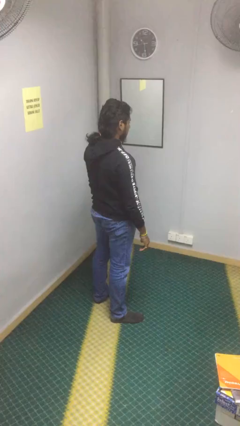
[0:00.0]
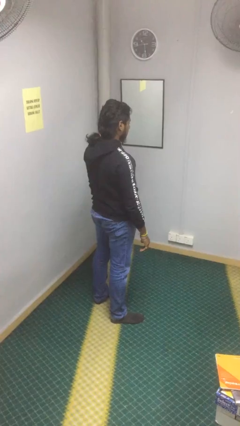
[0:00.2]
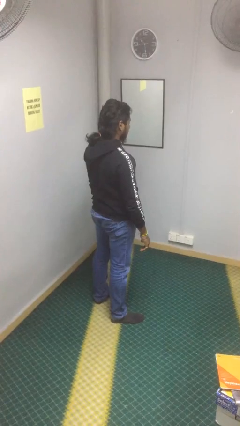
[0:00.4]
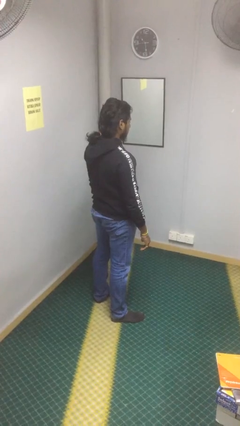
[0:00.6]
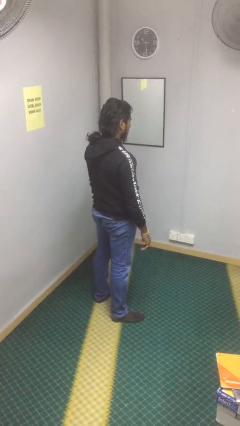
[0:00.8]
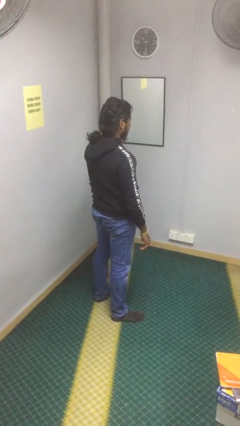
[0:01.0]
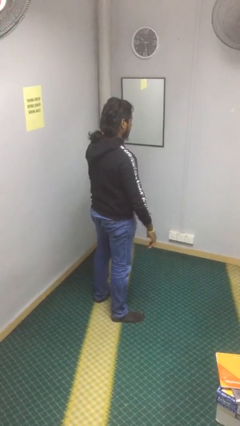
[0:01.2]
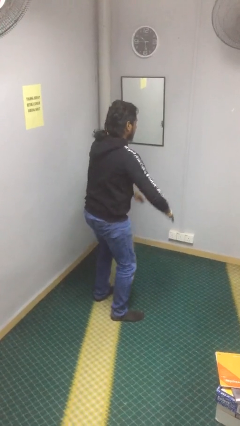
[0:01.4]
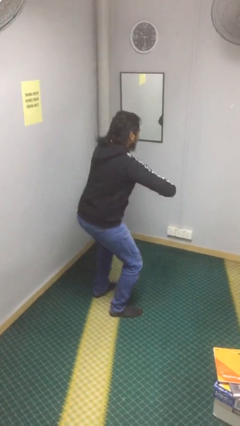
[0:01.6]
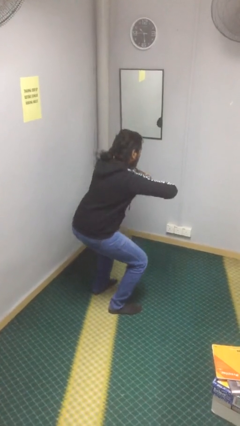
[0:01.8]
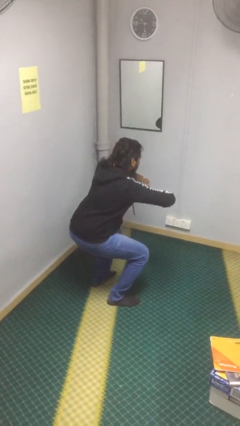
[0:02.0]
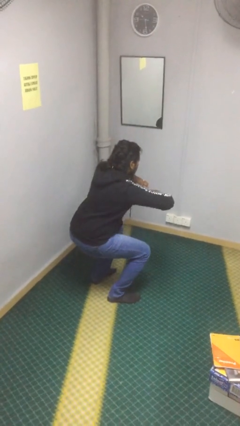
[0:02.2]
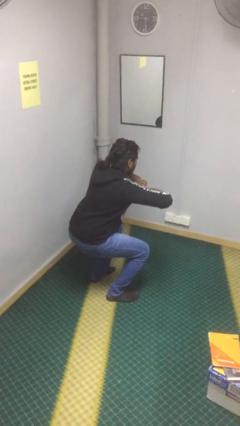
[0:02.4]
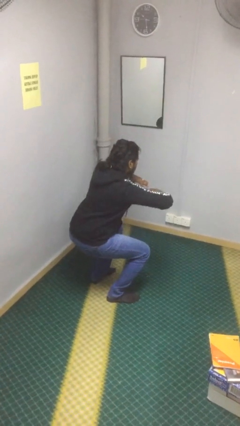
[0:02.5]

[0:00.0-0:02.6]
person squats

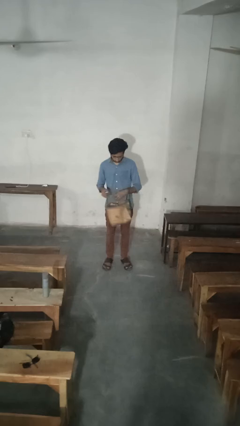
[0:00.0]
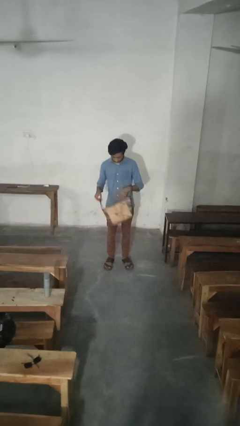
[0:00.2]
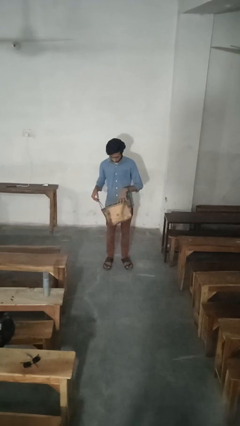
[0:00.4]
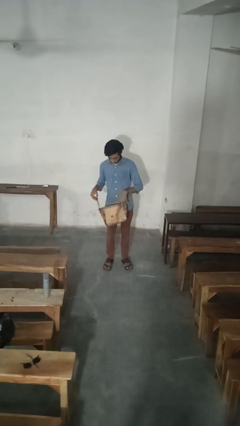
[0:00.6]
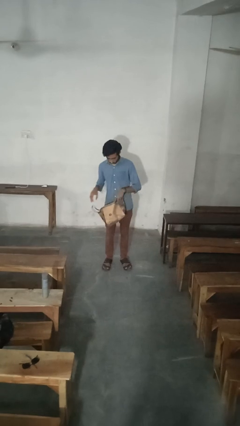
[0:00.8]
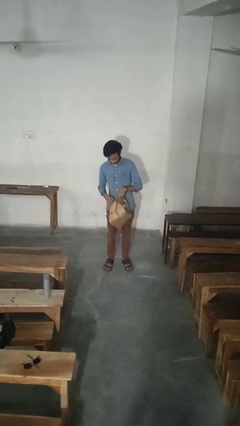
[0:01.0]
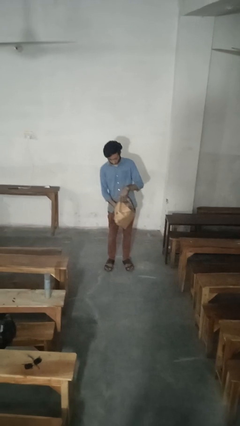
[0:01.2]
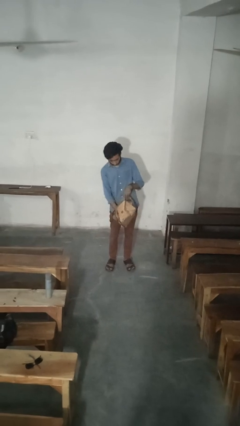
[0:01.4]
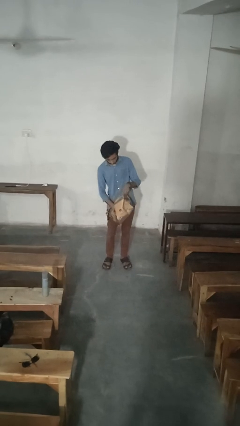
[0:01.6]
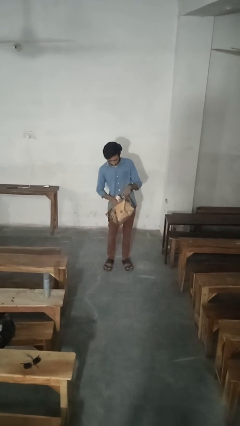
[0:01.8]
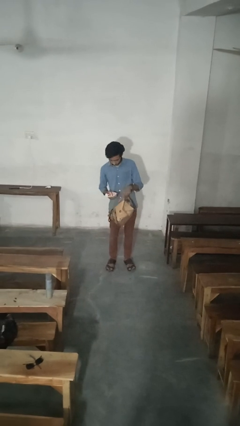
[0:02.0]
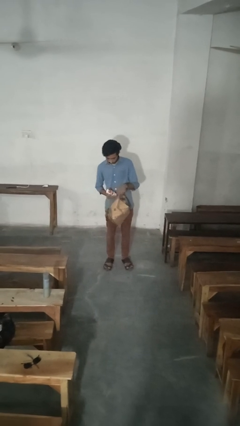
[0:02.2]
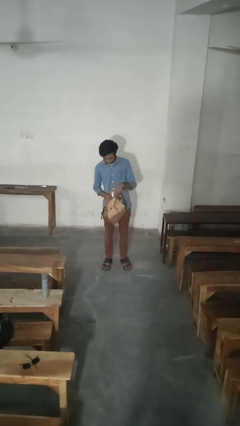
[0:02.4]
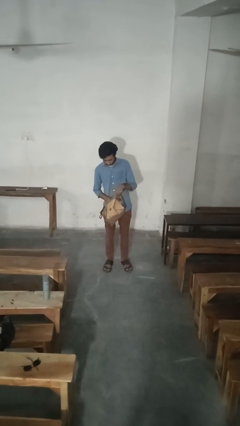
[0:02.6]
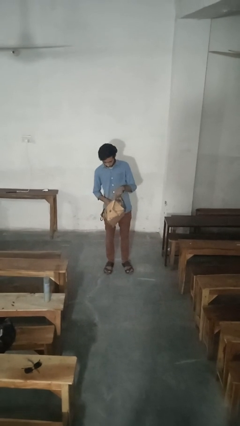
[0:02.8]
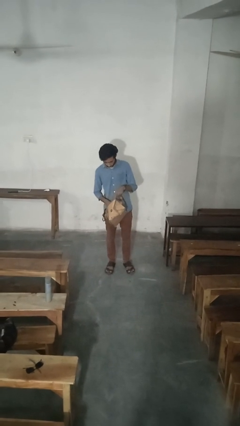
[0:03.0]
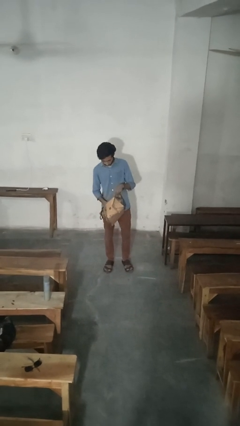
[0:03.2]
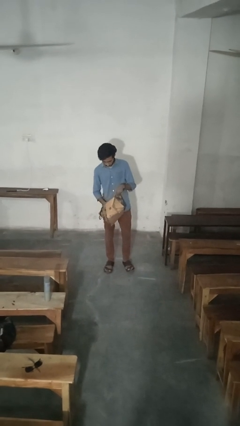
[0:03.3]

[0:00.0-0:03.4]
person searches in purse

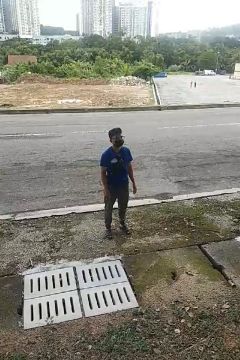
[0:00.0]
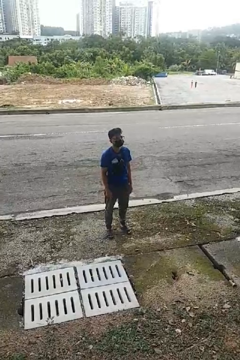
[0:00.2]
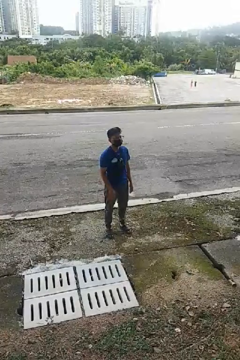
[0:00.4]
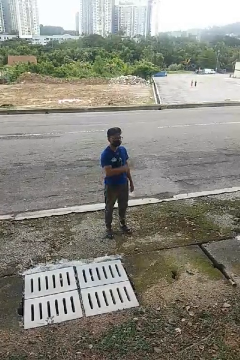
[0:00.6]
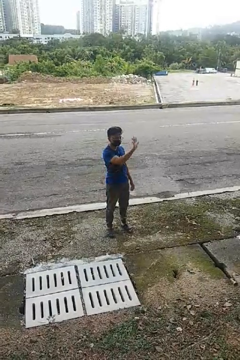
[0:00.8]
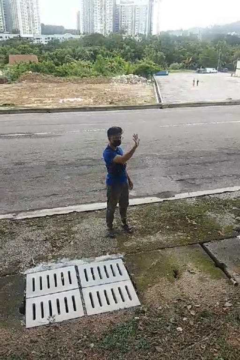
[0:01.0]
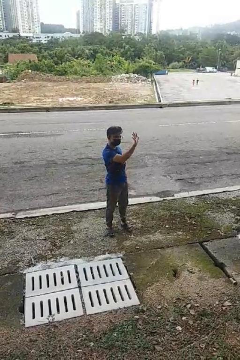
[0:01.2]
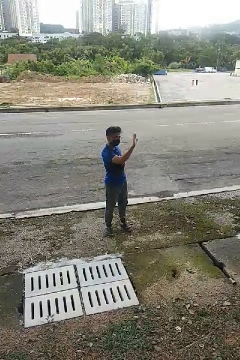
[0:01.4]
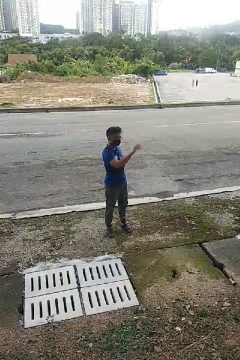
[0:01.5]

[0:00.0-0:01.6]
person gestures stop

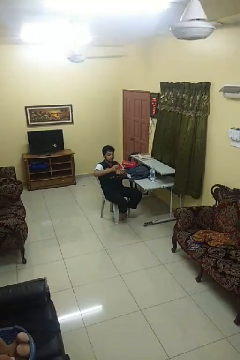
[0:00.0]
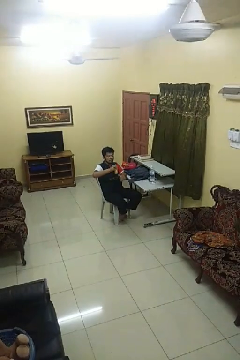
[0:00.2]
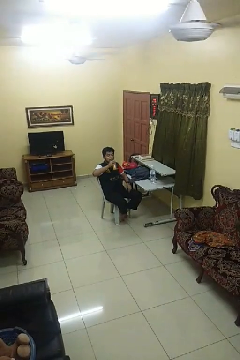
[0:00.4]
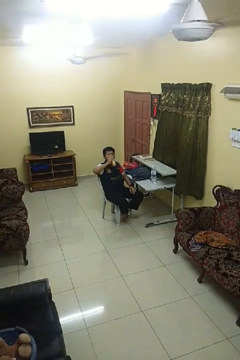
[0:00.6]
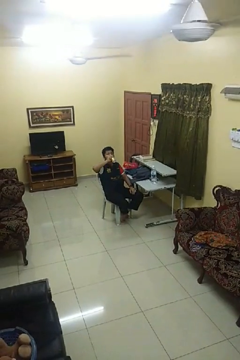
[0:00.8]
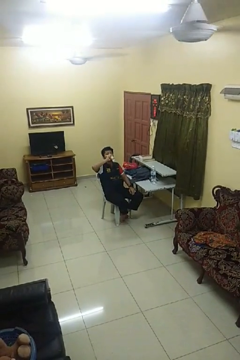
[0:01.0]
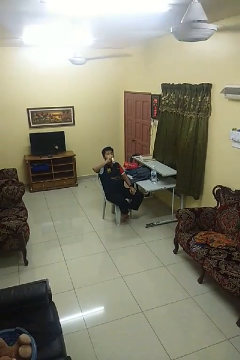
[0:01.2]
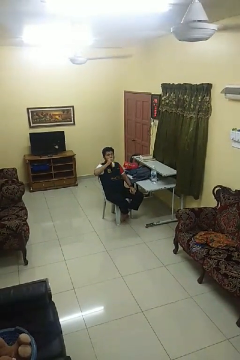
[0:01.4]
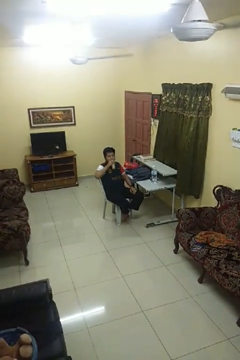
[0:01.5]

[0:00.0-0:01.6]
person drinks from beverage can

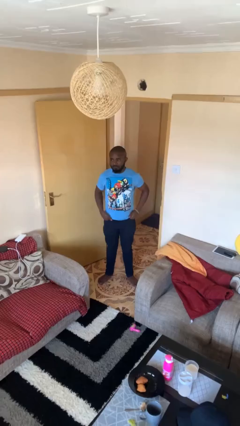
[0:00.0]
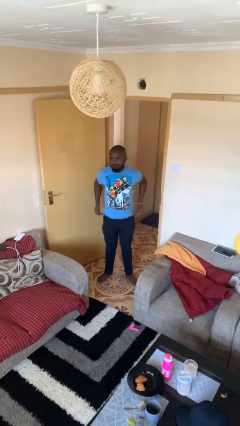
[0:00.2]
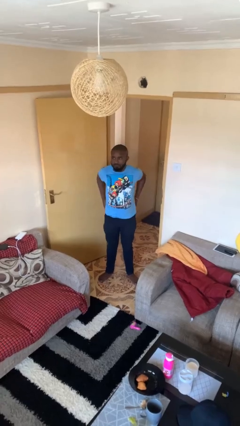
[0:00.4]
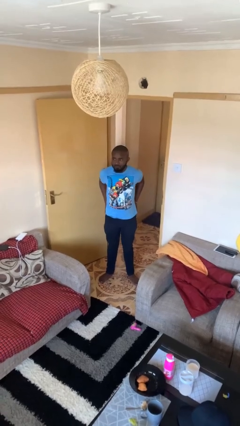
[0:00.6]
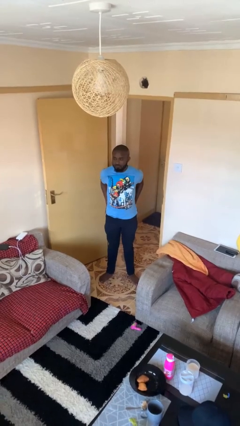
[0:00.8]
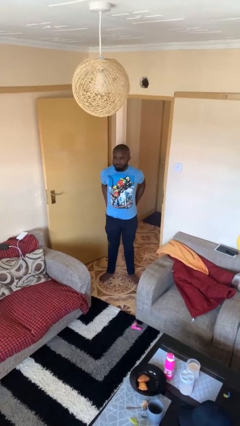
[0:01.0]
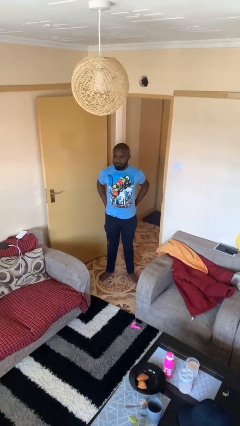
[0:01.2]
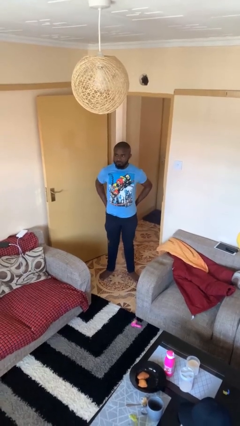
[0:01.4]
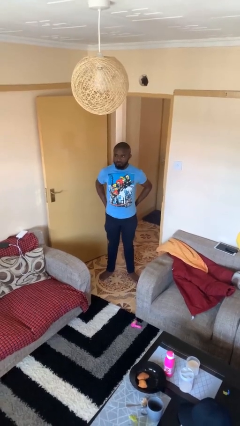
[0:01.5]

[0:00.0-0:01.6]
person puts hands in back pockets

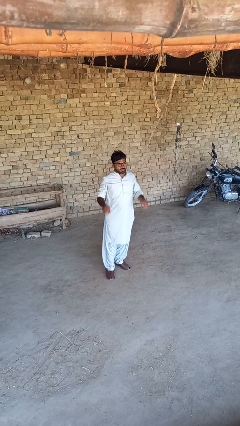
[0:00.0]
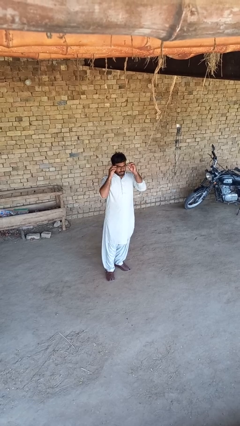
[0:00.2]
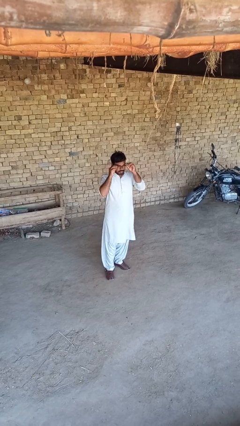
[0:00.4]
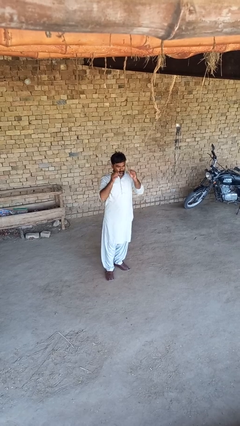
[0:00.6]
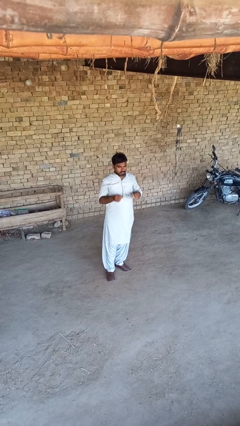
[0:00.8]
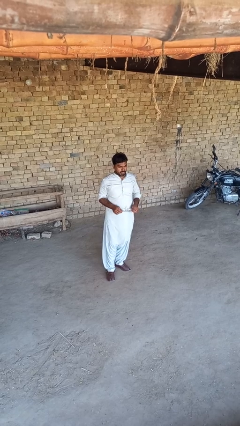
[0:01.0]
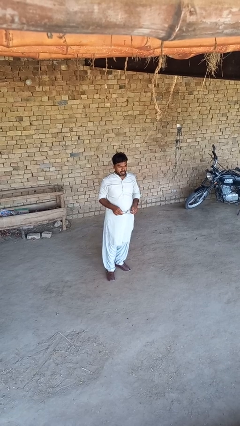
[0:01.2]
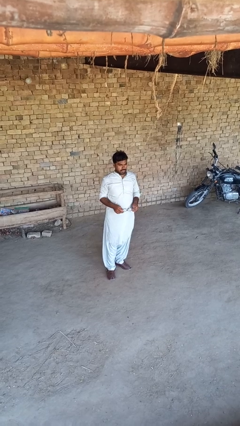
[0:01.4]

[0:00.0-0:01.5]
person takes off glasses

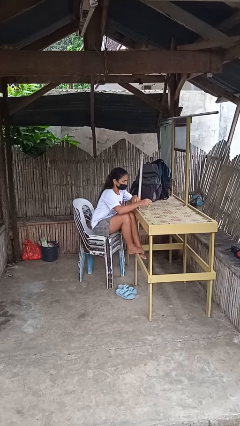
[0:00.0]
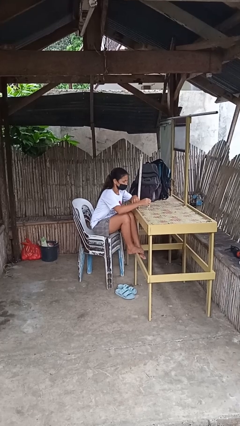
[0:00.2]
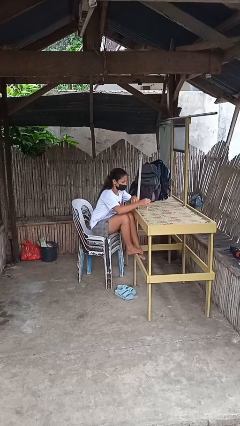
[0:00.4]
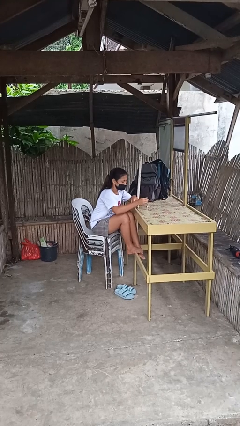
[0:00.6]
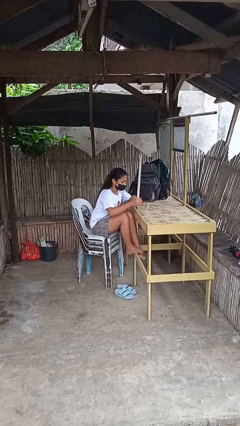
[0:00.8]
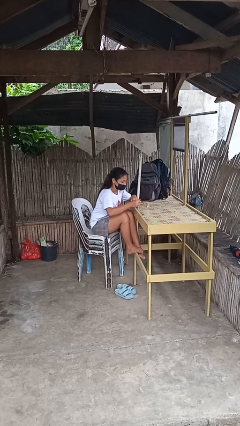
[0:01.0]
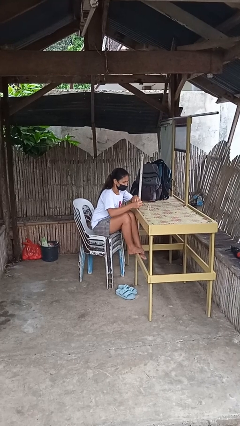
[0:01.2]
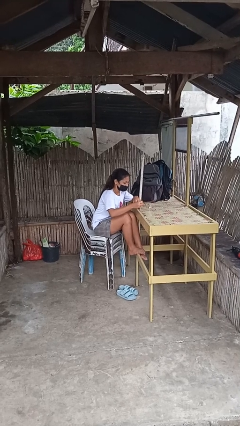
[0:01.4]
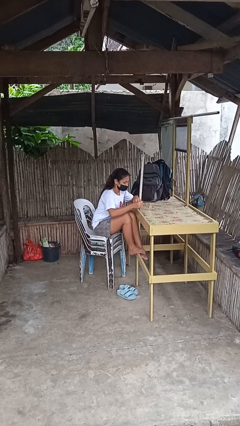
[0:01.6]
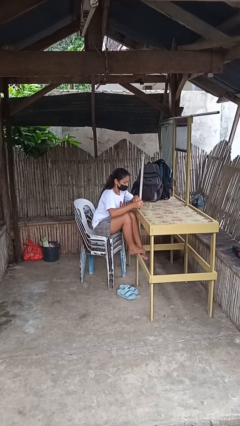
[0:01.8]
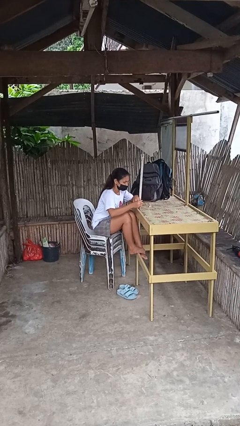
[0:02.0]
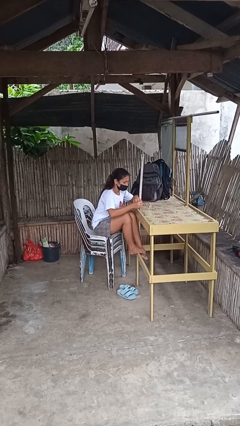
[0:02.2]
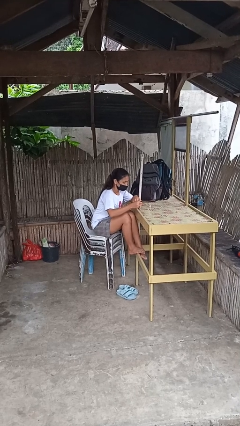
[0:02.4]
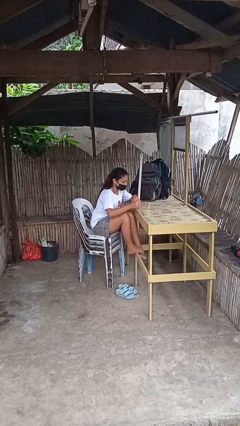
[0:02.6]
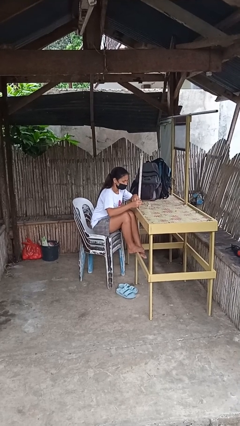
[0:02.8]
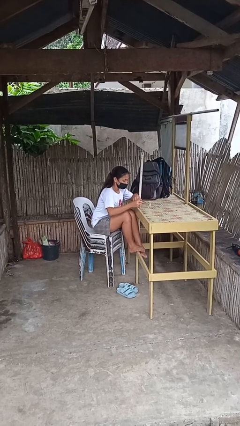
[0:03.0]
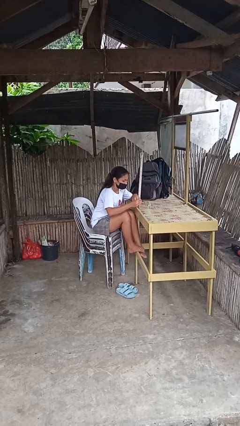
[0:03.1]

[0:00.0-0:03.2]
person paints fingernails

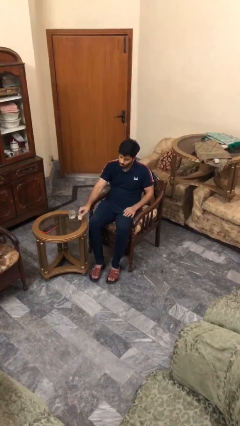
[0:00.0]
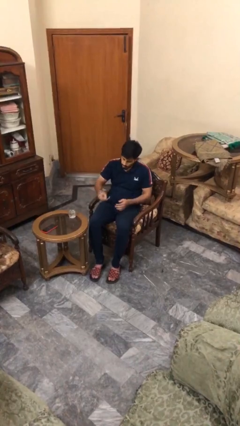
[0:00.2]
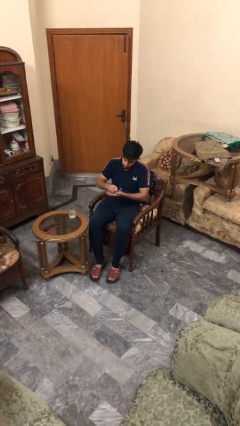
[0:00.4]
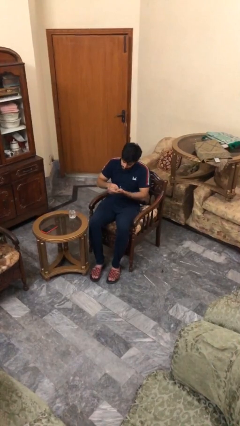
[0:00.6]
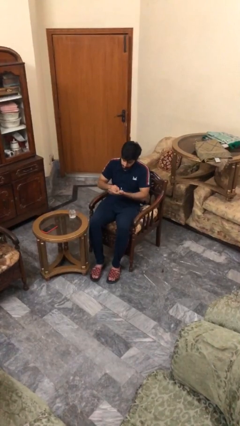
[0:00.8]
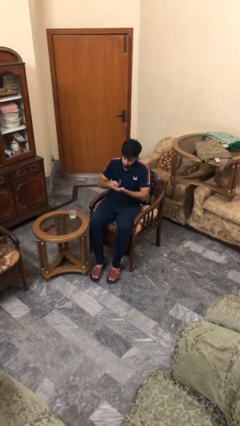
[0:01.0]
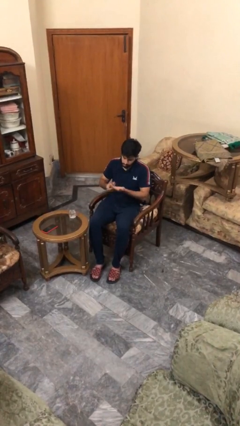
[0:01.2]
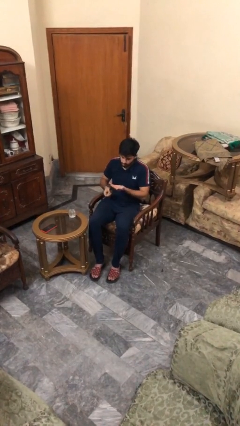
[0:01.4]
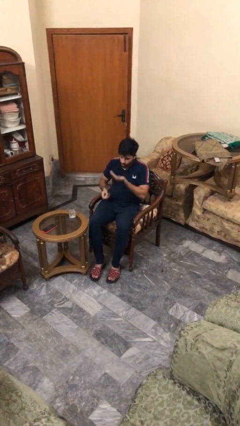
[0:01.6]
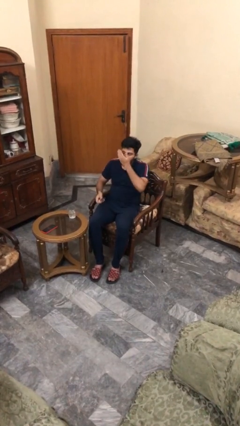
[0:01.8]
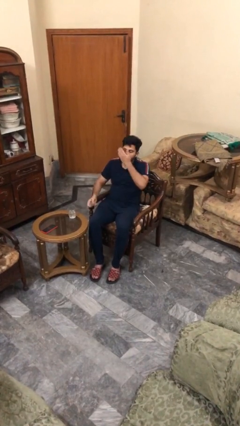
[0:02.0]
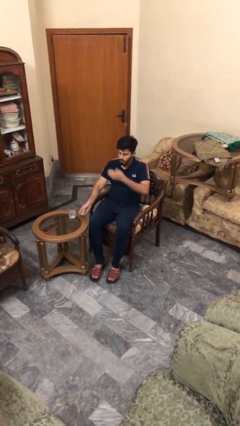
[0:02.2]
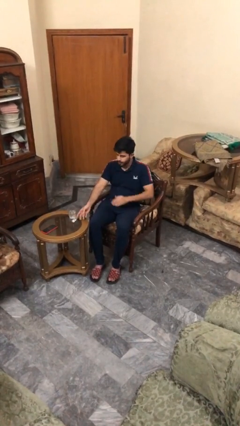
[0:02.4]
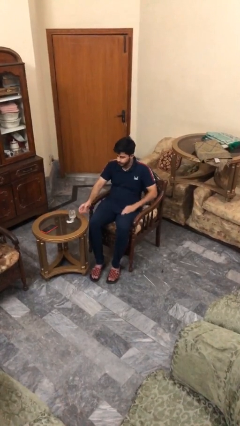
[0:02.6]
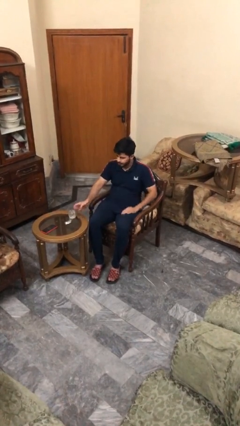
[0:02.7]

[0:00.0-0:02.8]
person takes medicine pills
